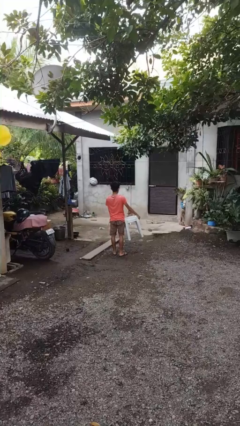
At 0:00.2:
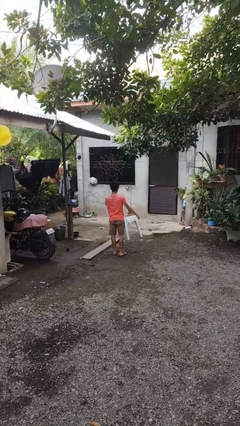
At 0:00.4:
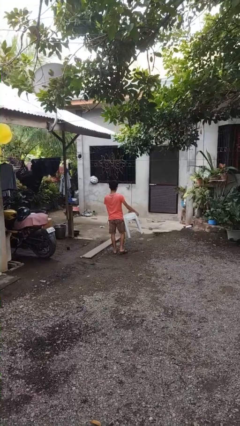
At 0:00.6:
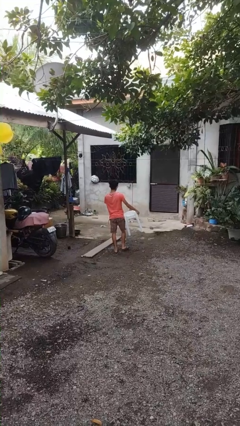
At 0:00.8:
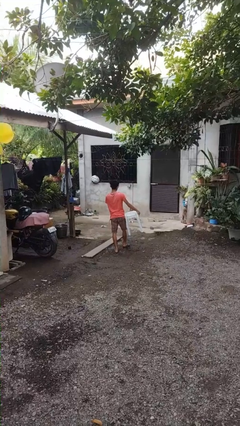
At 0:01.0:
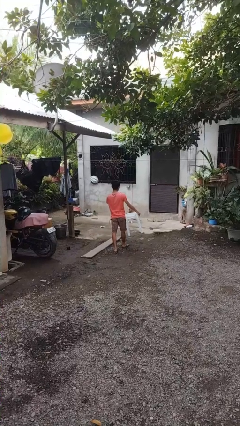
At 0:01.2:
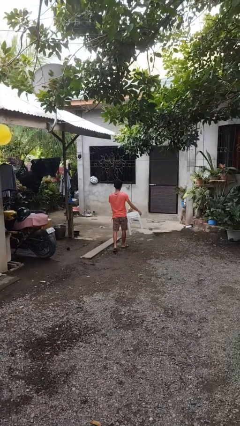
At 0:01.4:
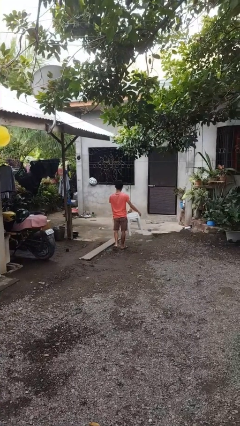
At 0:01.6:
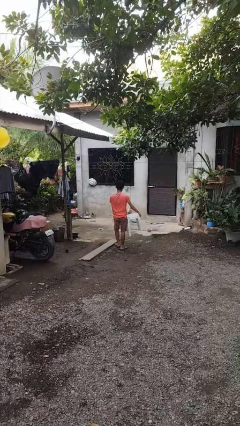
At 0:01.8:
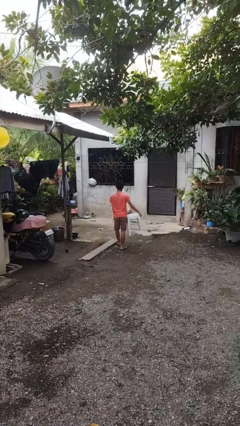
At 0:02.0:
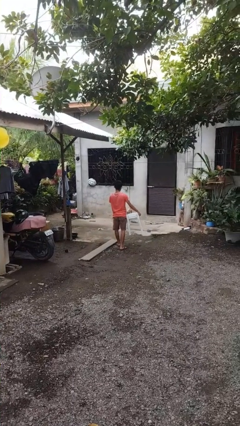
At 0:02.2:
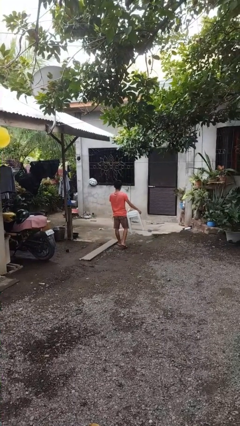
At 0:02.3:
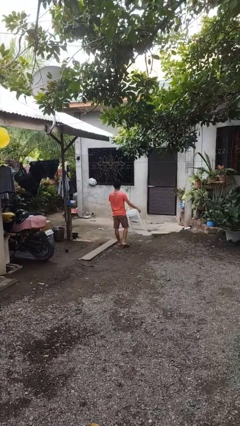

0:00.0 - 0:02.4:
person carries furniture

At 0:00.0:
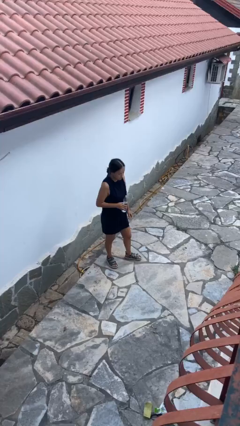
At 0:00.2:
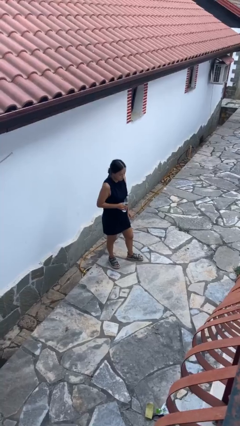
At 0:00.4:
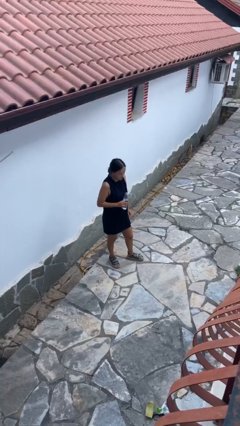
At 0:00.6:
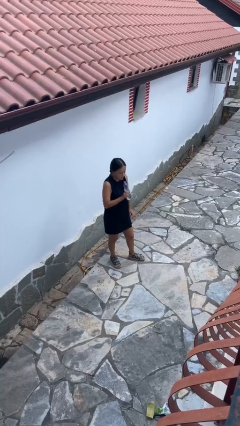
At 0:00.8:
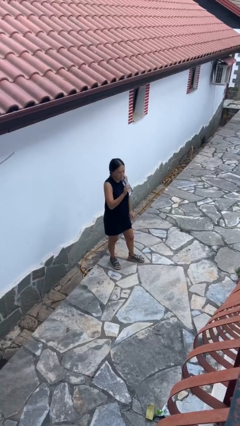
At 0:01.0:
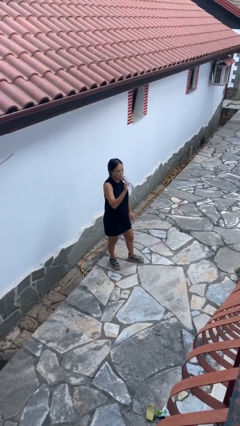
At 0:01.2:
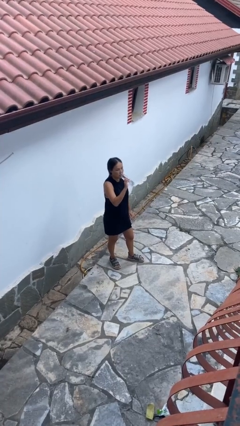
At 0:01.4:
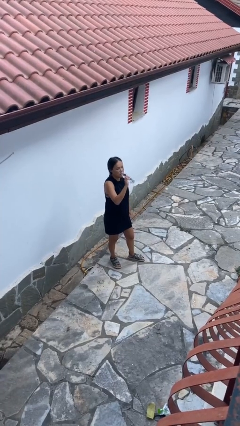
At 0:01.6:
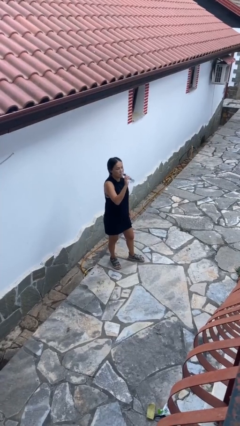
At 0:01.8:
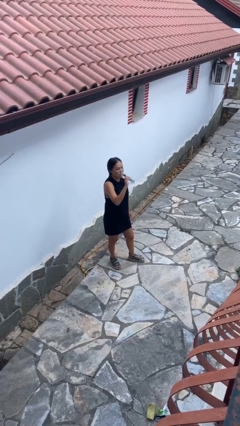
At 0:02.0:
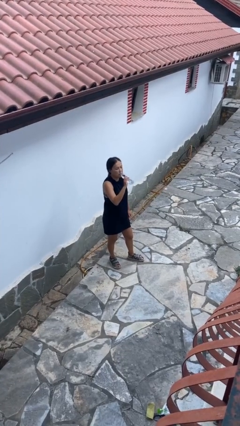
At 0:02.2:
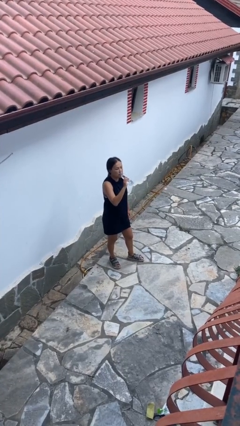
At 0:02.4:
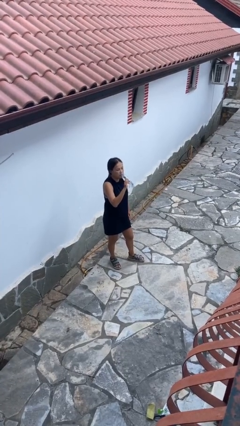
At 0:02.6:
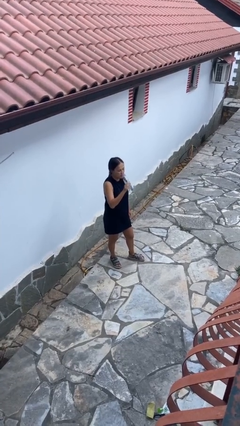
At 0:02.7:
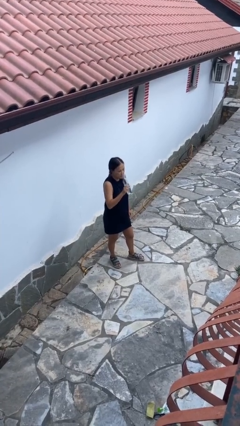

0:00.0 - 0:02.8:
person drinks from bottle

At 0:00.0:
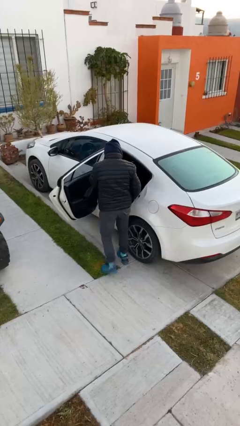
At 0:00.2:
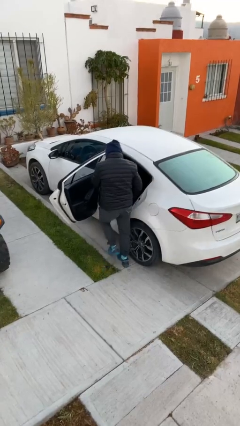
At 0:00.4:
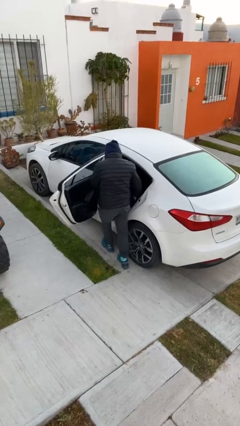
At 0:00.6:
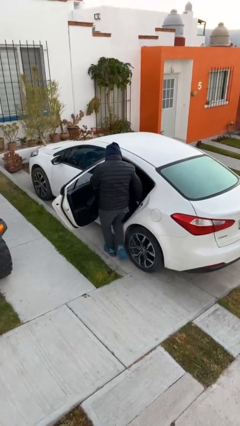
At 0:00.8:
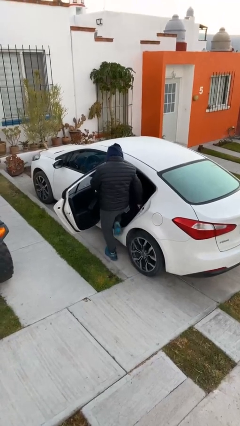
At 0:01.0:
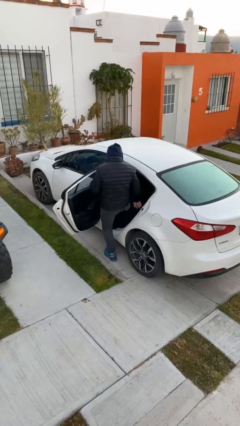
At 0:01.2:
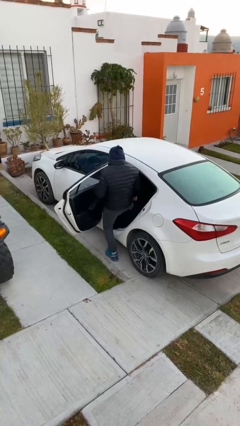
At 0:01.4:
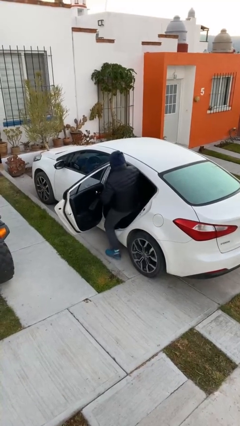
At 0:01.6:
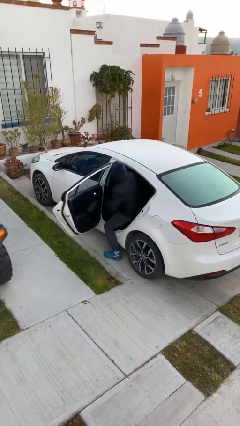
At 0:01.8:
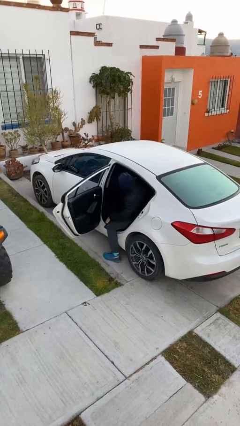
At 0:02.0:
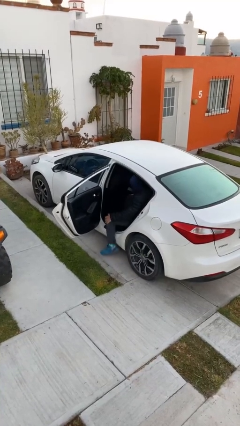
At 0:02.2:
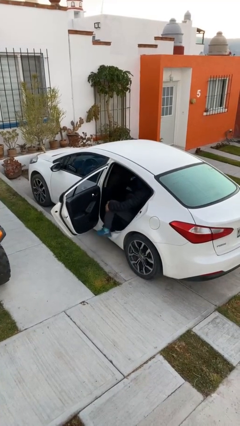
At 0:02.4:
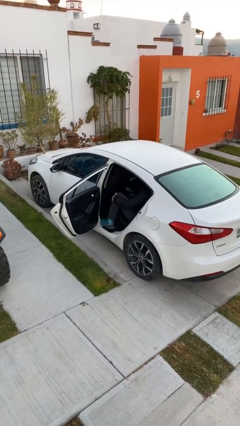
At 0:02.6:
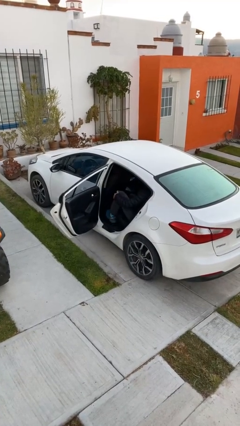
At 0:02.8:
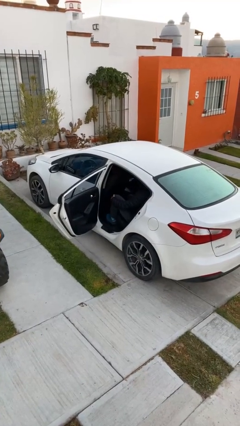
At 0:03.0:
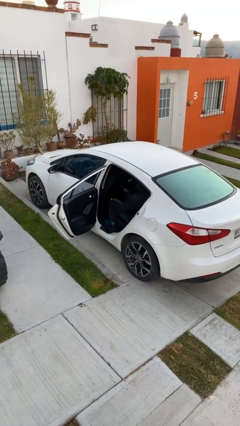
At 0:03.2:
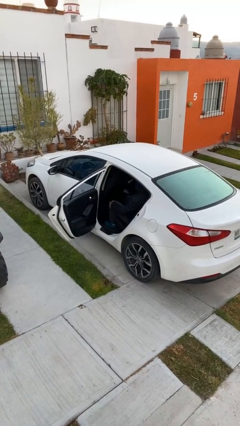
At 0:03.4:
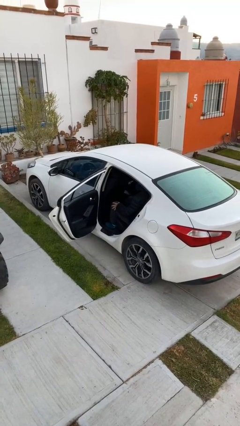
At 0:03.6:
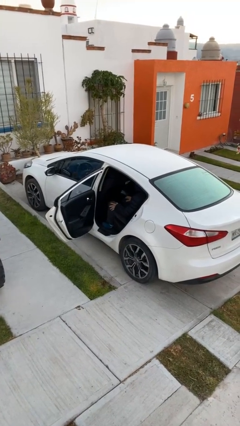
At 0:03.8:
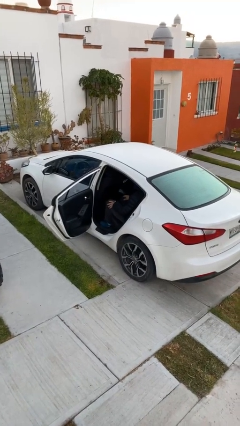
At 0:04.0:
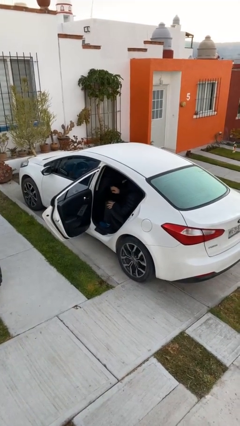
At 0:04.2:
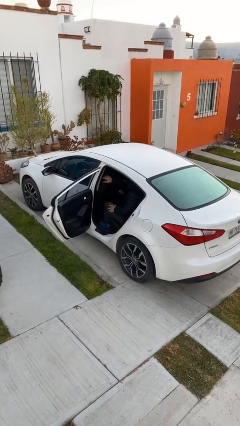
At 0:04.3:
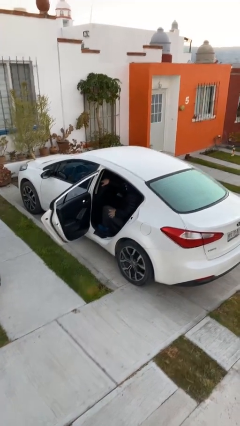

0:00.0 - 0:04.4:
person enters car

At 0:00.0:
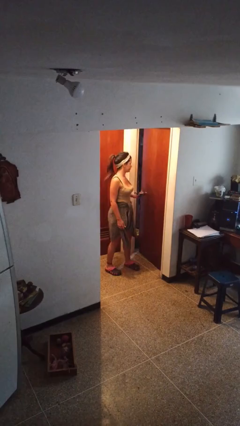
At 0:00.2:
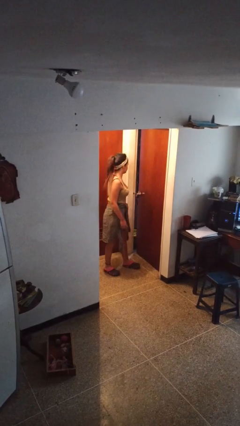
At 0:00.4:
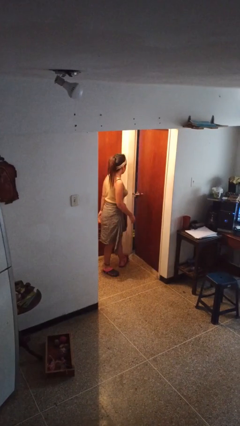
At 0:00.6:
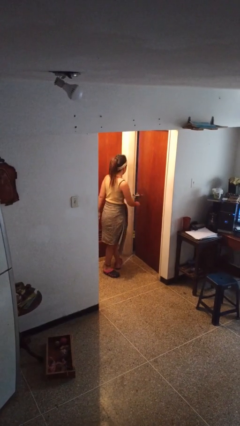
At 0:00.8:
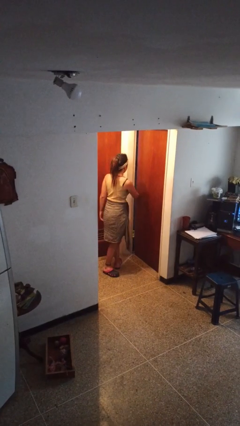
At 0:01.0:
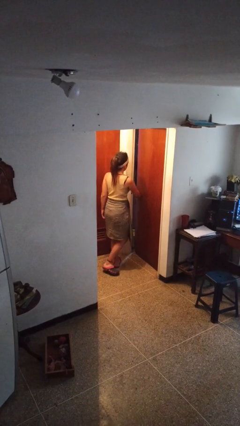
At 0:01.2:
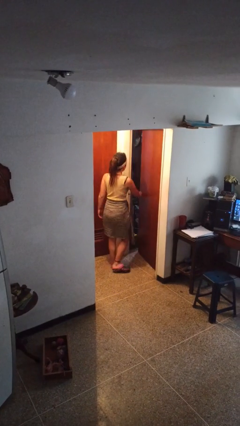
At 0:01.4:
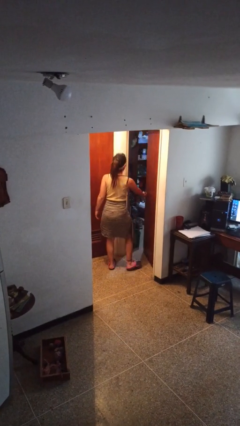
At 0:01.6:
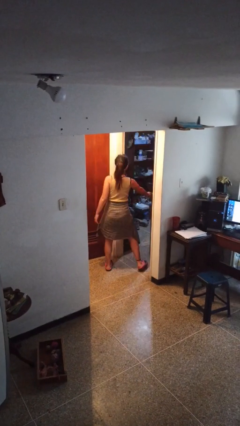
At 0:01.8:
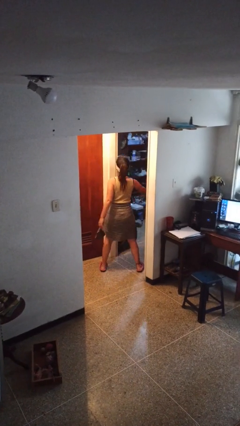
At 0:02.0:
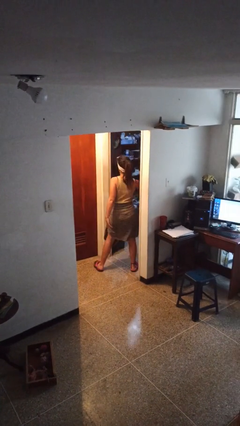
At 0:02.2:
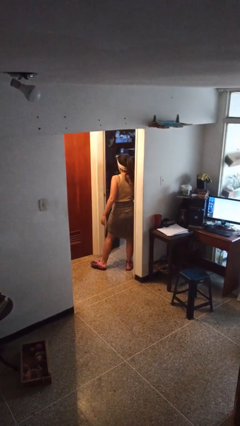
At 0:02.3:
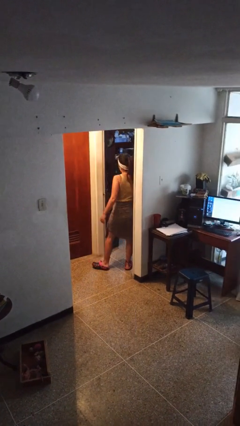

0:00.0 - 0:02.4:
person opens facility door

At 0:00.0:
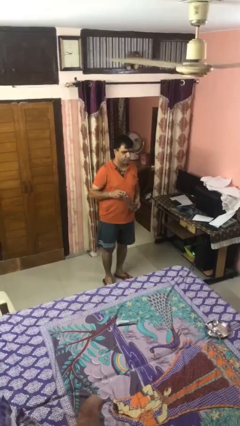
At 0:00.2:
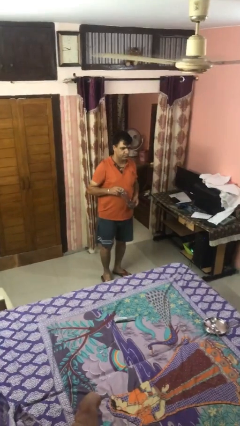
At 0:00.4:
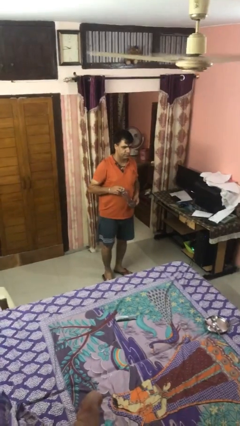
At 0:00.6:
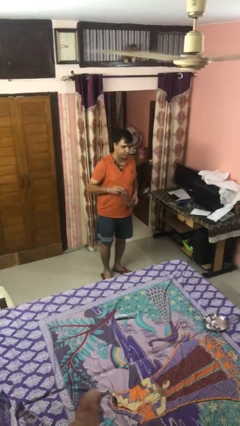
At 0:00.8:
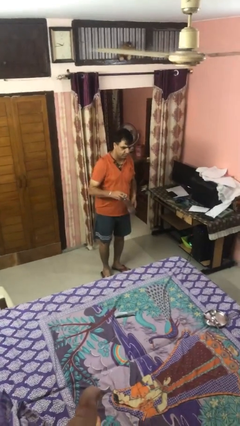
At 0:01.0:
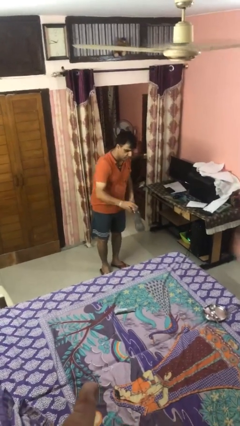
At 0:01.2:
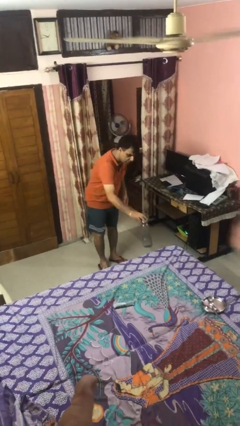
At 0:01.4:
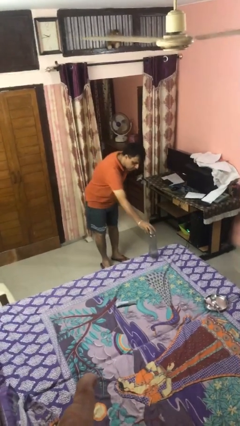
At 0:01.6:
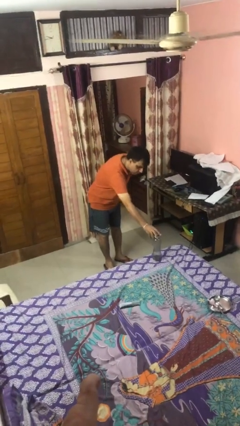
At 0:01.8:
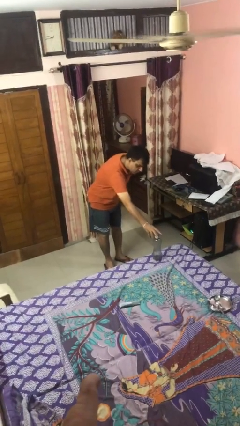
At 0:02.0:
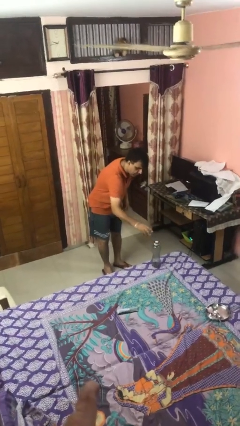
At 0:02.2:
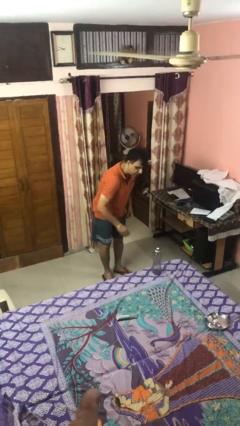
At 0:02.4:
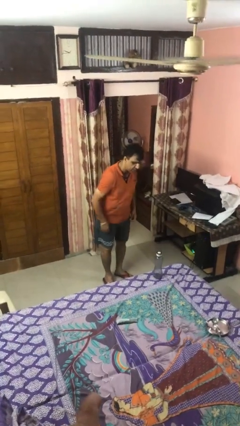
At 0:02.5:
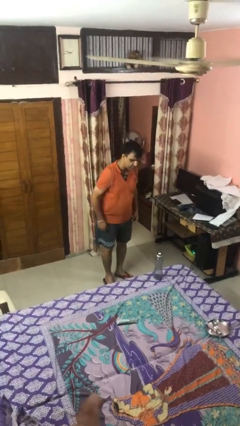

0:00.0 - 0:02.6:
person puts down object on bed

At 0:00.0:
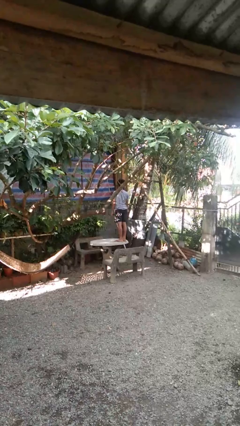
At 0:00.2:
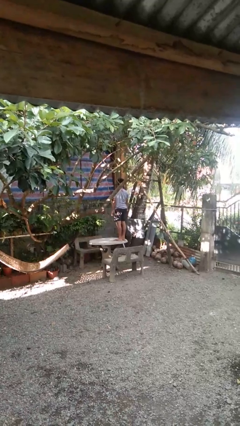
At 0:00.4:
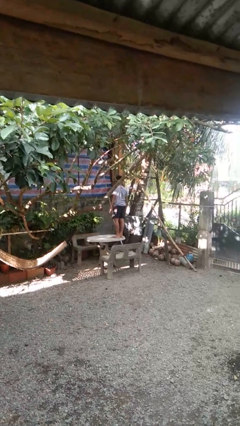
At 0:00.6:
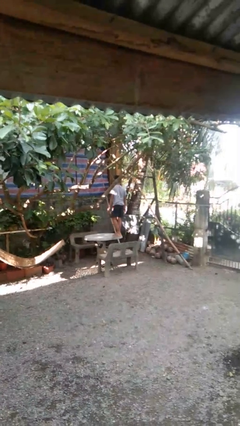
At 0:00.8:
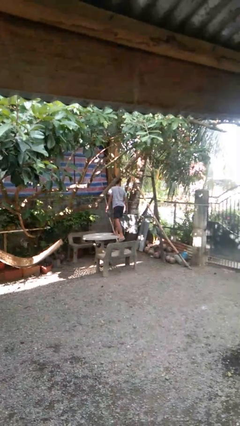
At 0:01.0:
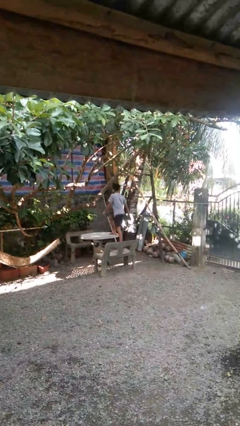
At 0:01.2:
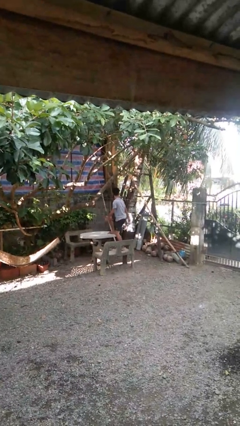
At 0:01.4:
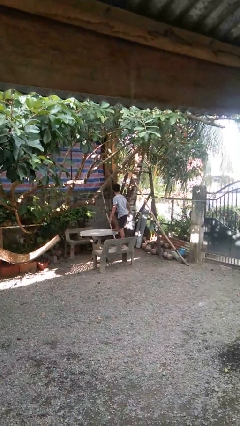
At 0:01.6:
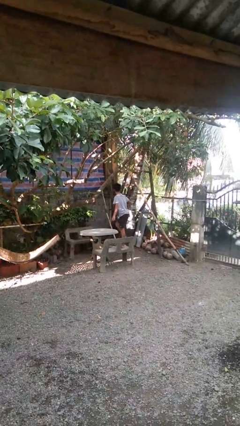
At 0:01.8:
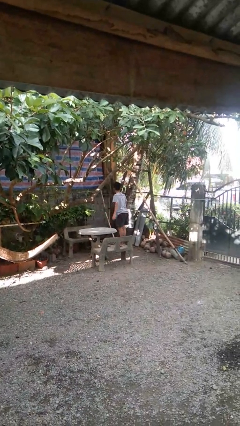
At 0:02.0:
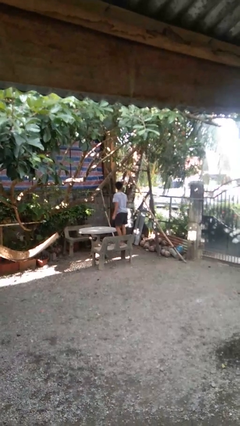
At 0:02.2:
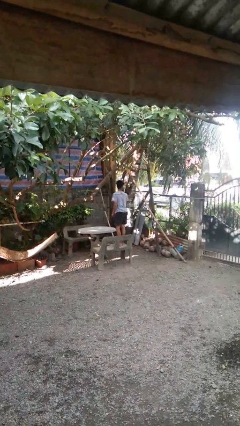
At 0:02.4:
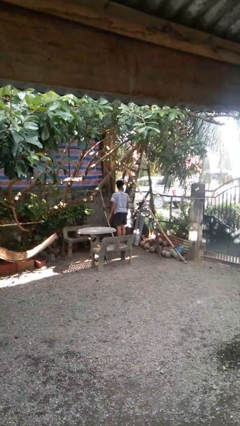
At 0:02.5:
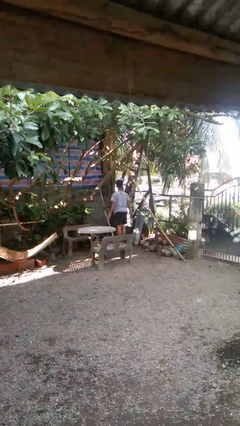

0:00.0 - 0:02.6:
person climbs off table
